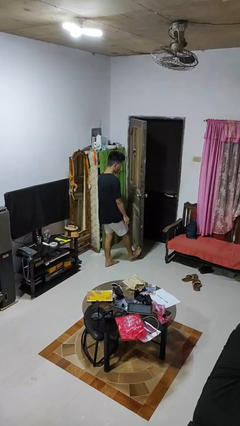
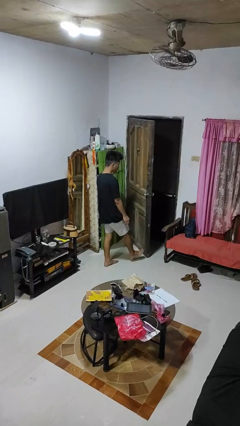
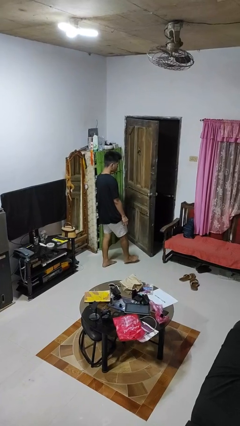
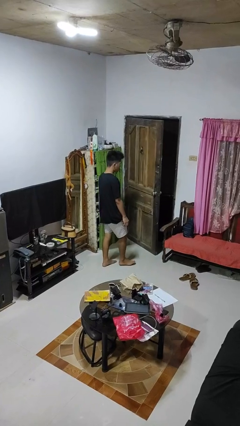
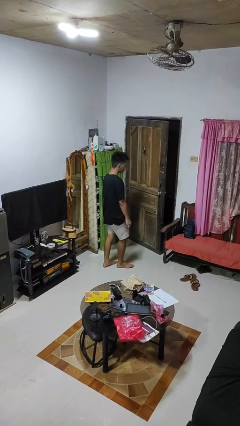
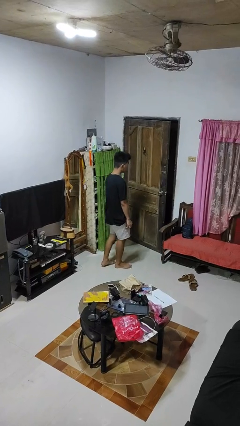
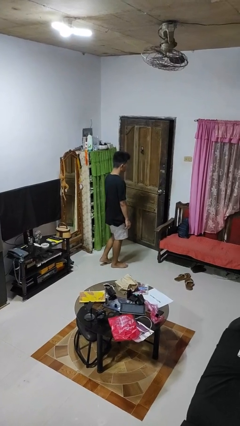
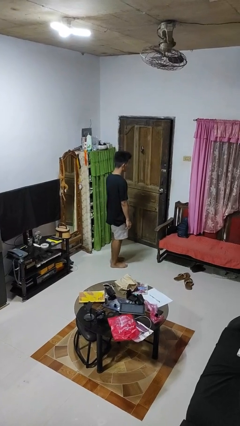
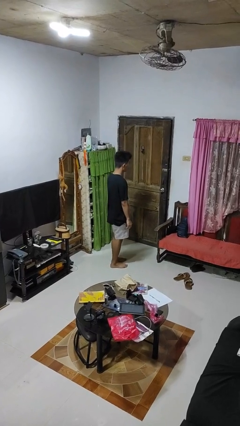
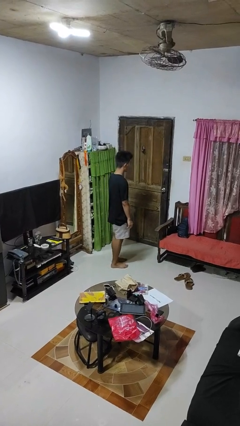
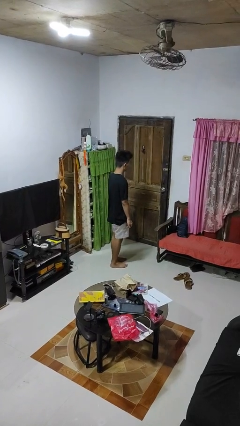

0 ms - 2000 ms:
person closes door with foot

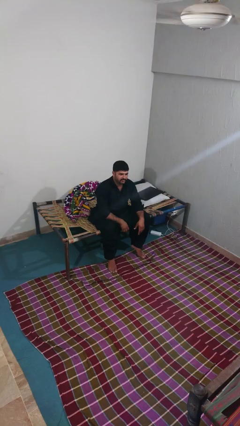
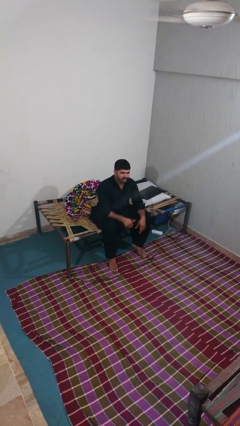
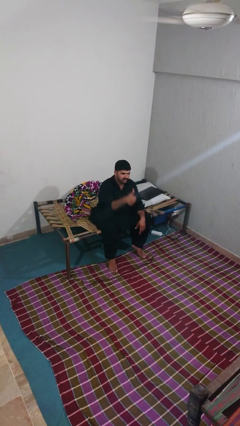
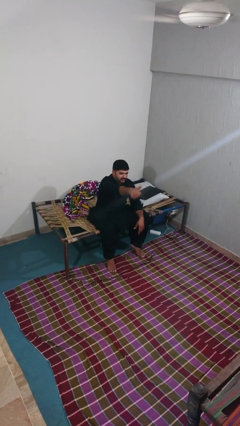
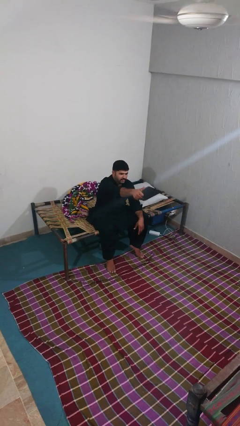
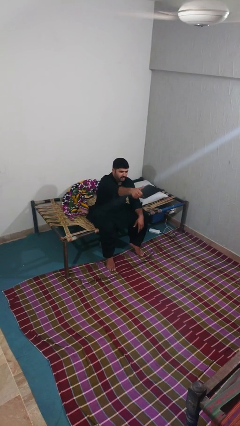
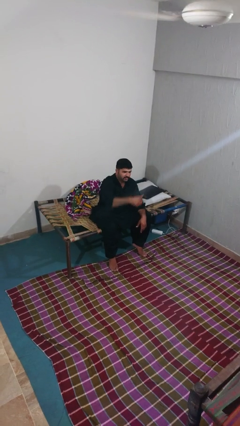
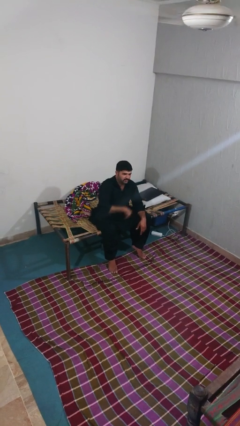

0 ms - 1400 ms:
person gestures thumbs up

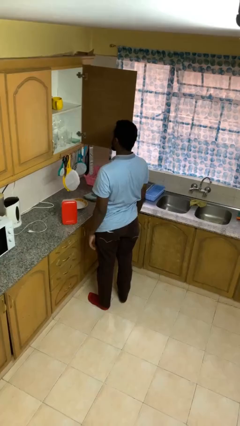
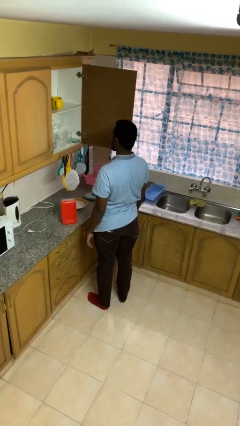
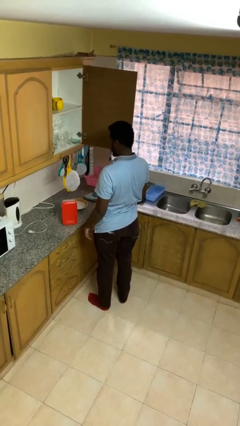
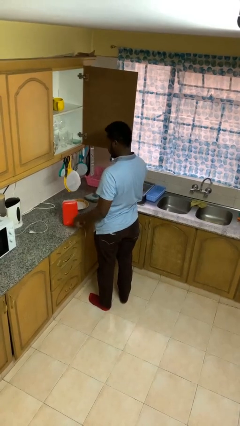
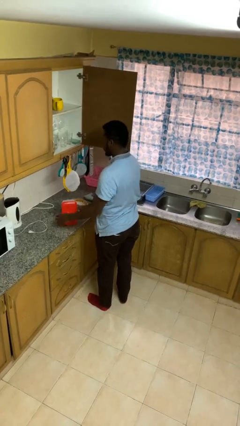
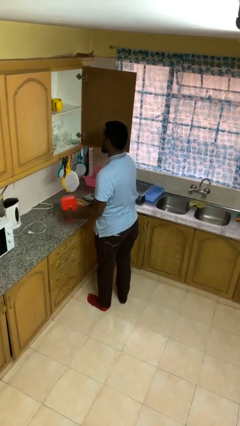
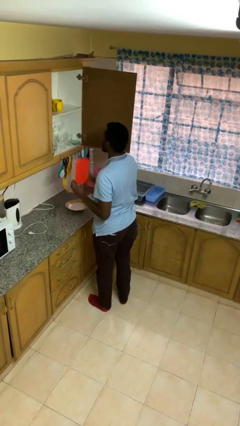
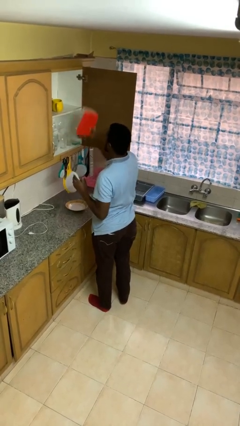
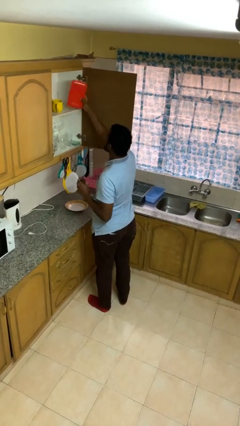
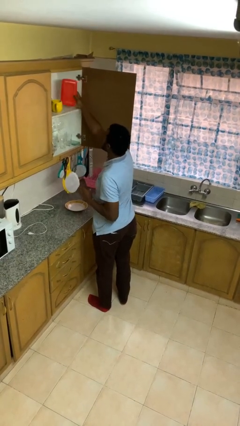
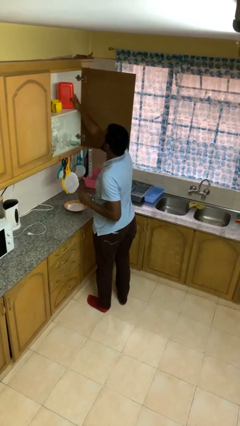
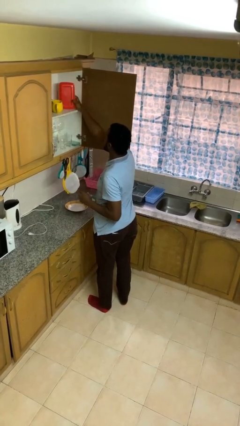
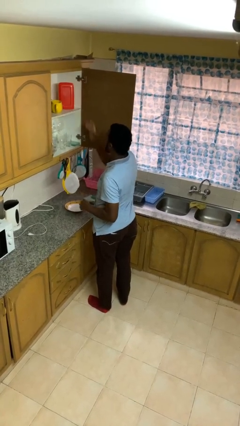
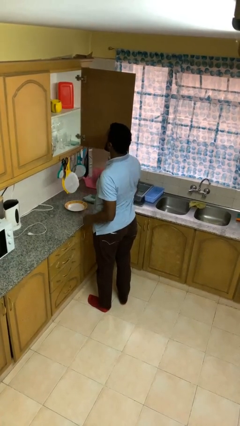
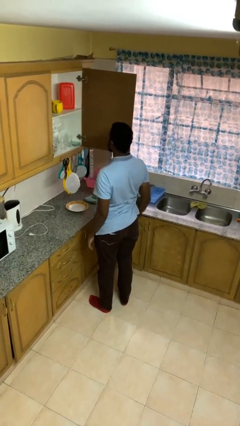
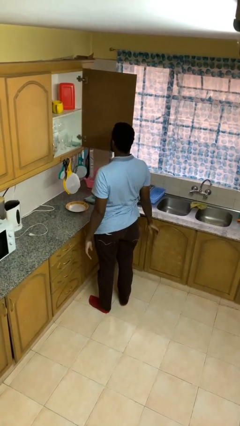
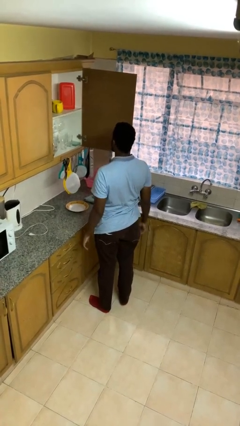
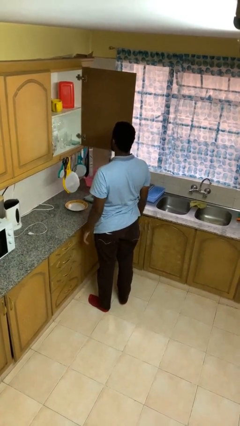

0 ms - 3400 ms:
person puts object in cabinet

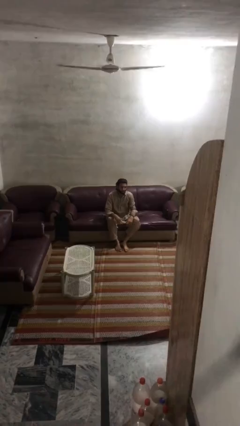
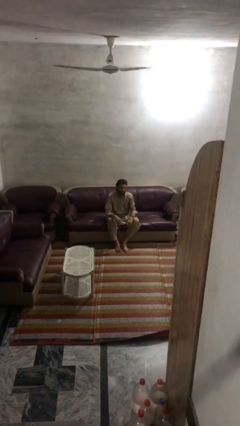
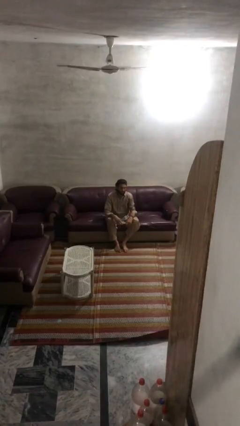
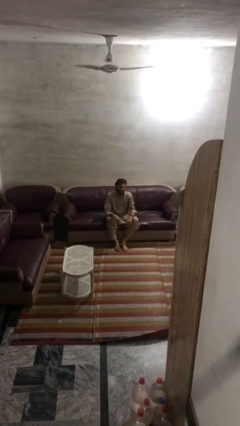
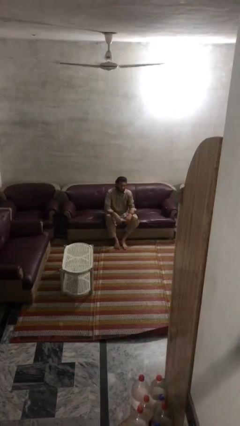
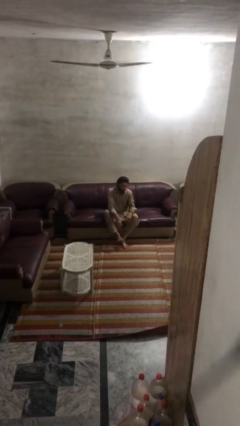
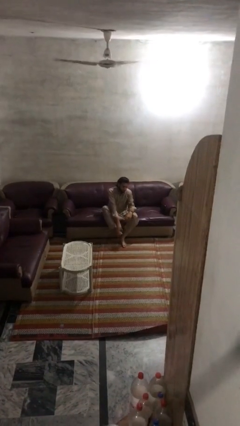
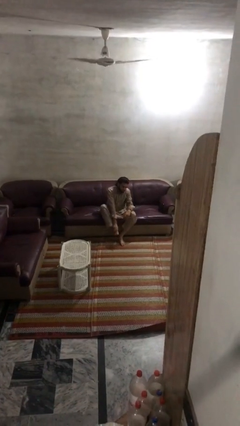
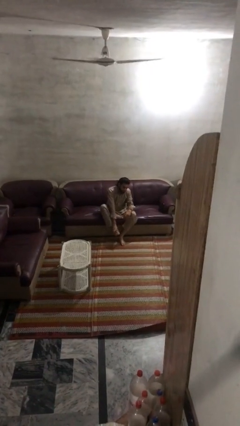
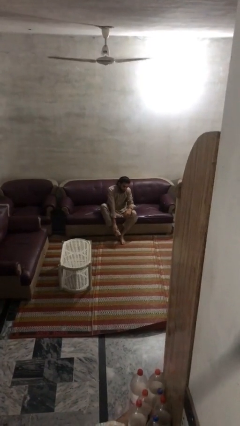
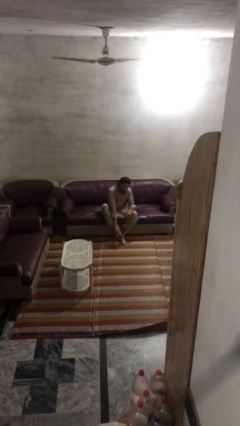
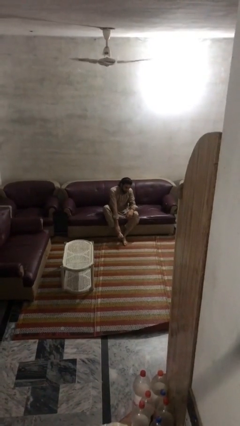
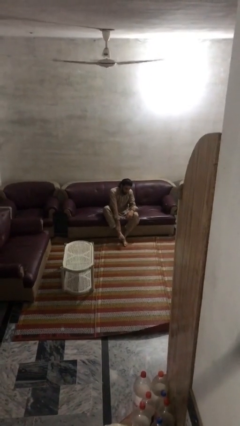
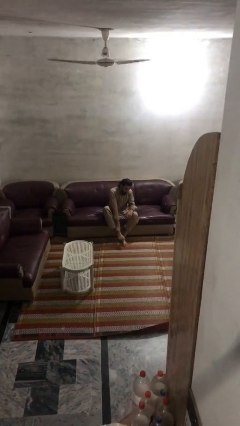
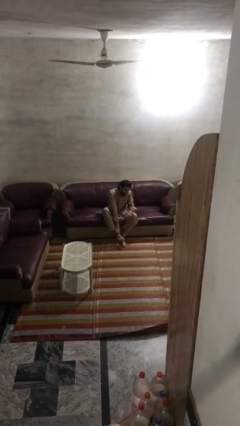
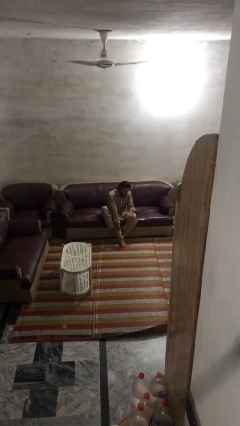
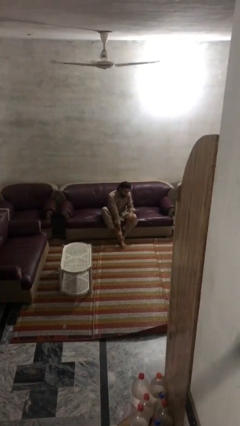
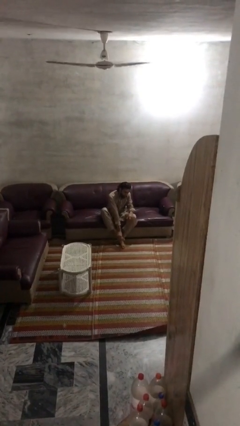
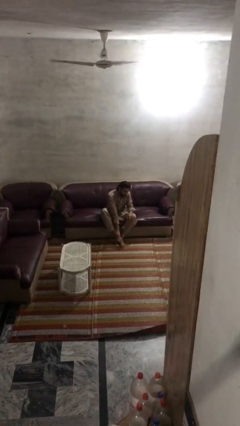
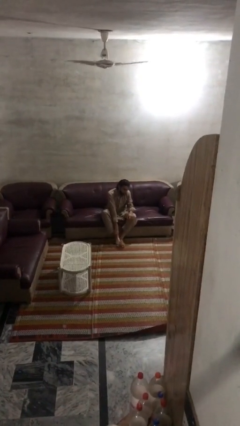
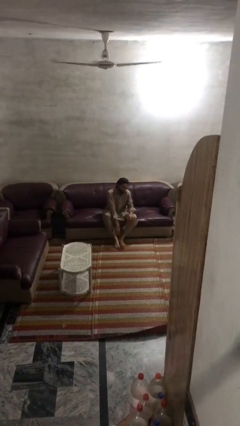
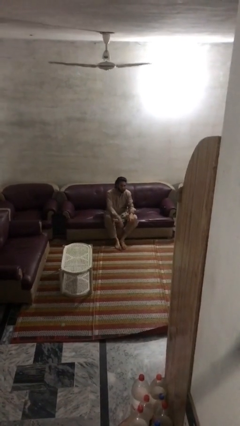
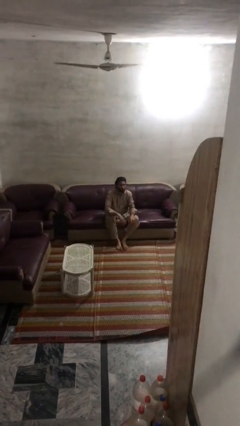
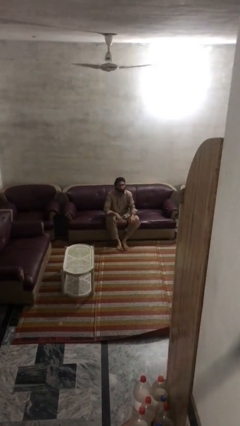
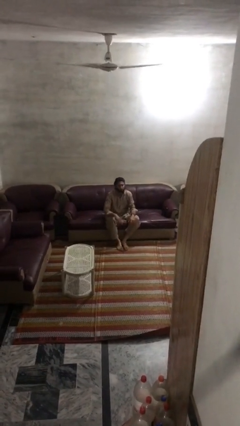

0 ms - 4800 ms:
person rubs foot

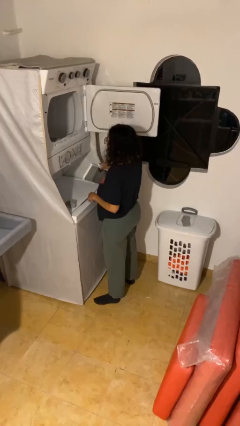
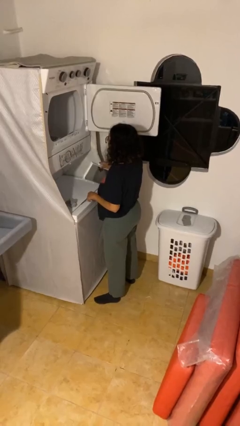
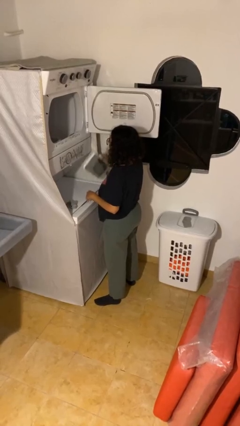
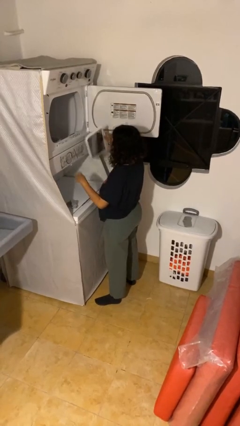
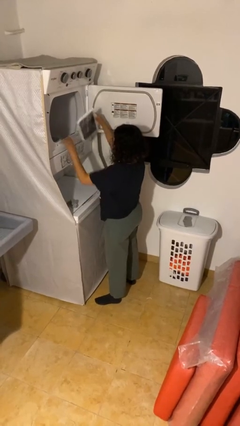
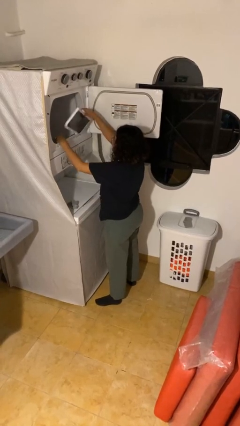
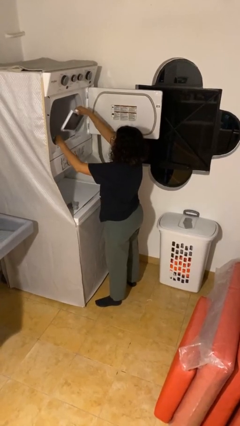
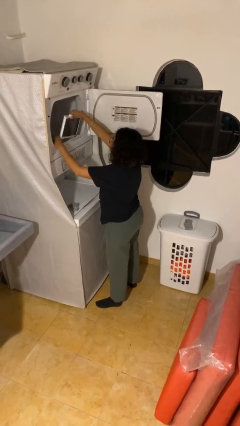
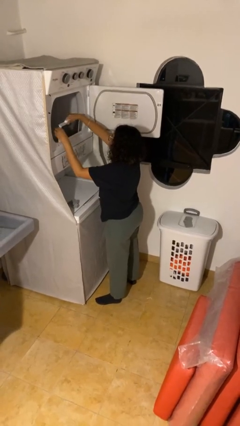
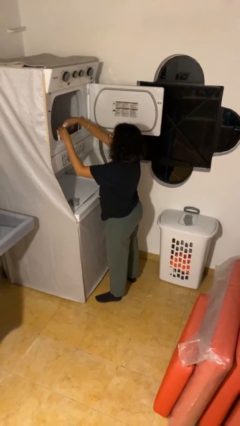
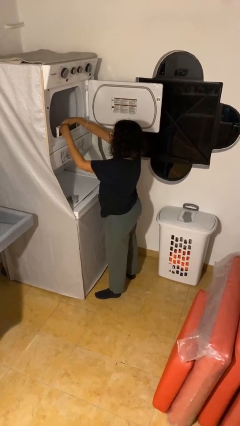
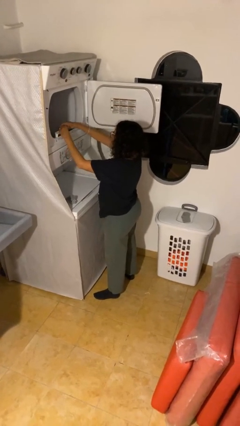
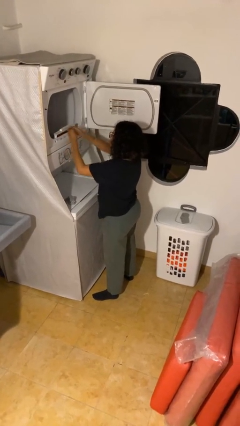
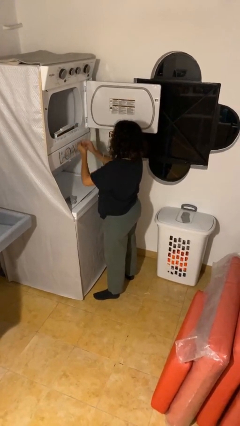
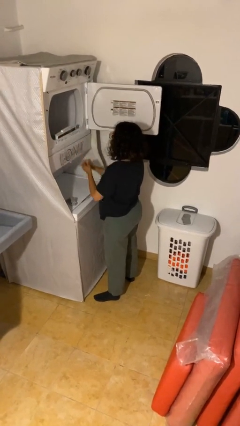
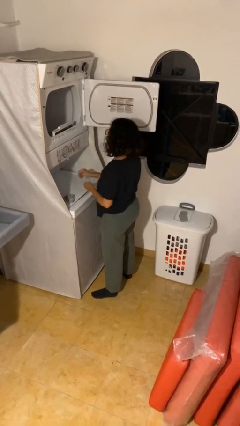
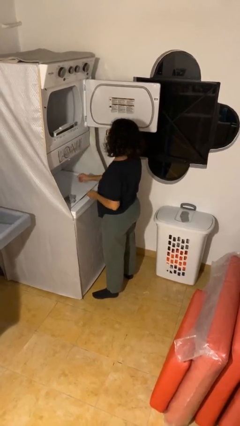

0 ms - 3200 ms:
person cleans dryer lint trap

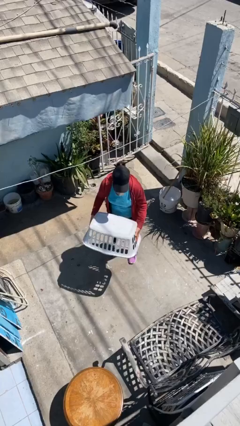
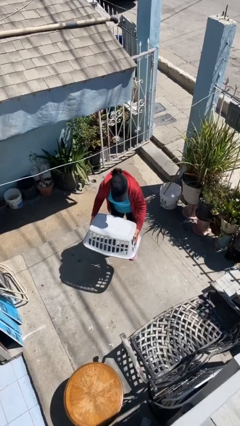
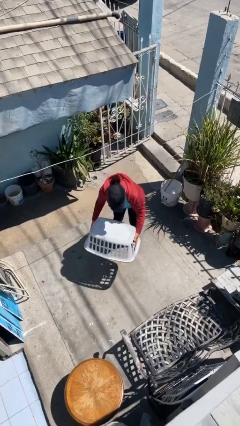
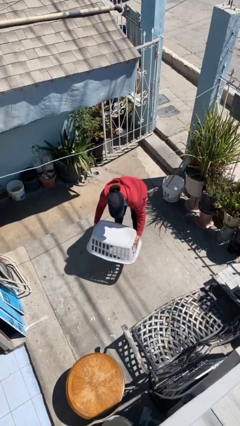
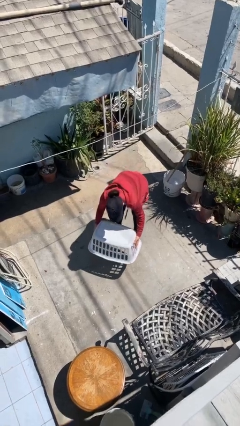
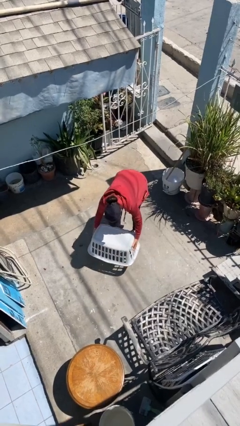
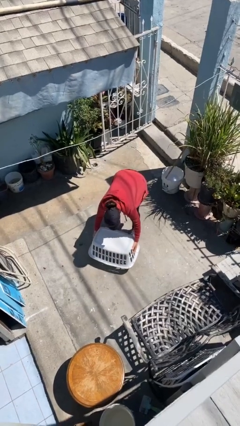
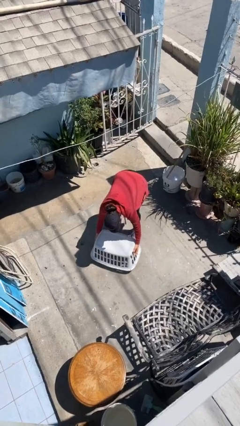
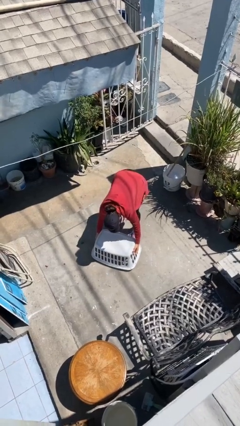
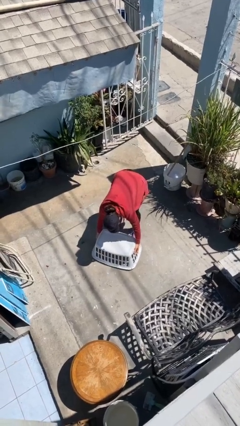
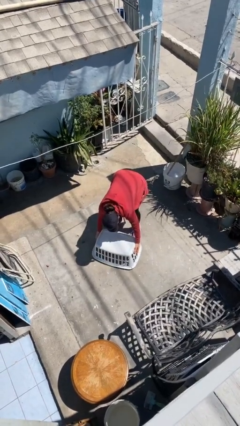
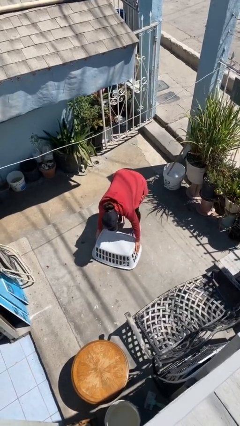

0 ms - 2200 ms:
person puts down object on floor

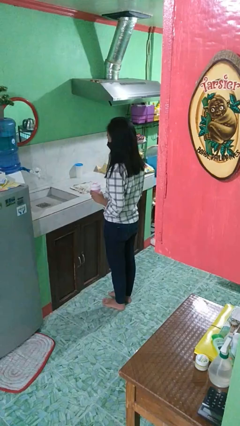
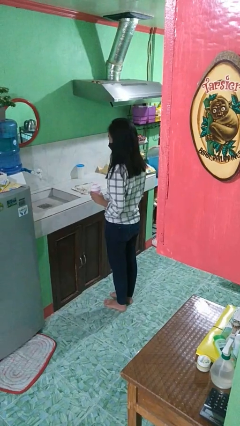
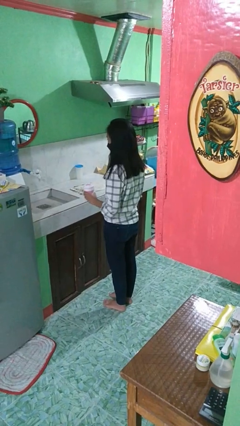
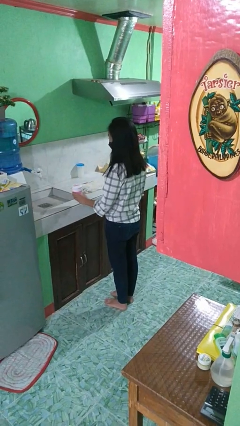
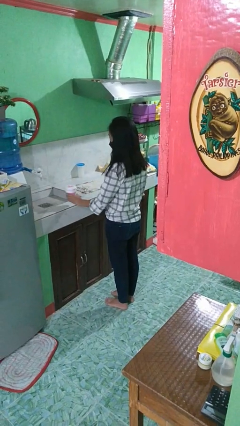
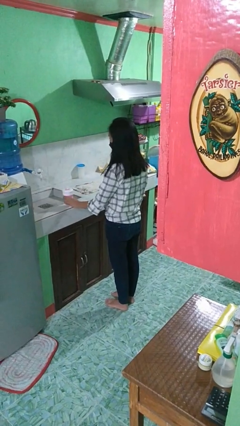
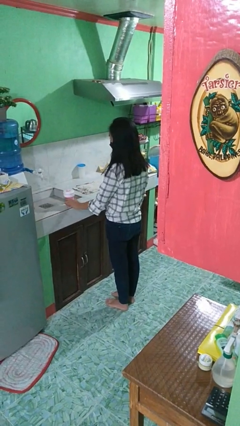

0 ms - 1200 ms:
person puts down object on countertop
